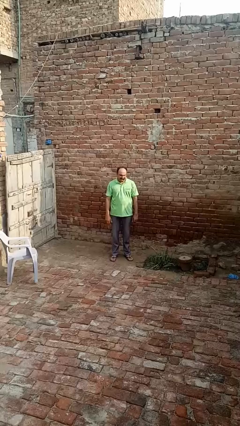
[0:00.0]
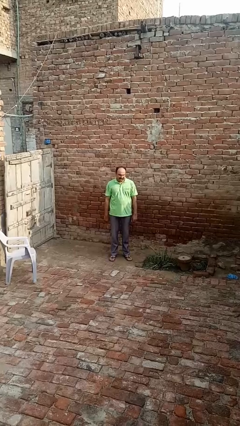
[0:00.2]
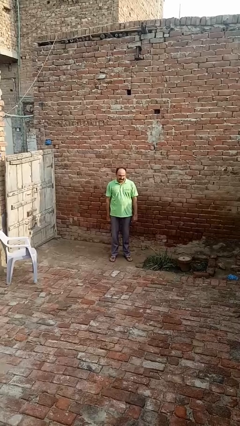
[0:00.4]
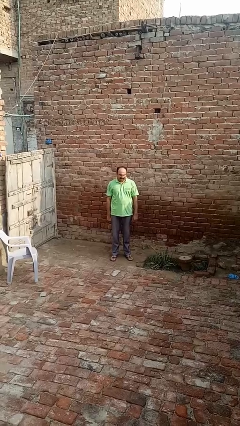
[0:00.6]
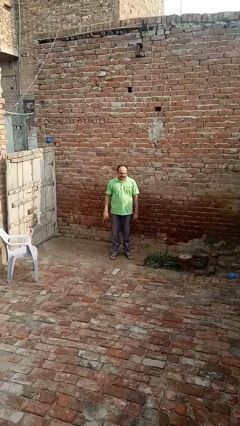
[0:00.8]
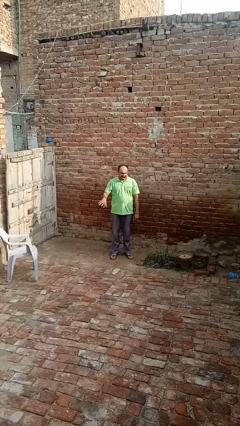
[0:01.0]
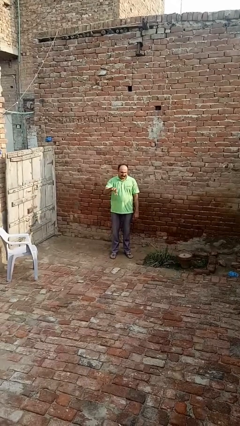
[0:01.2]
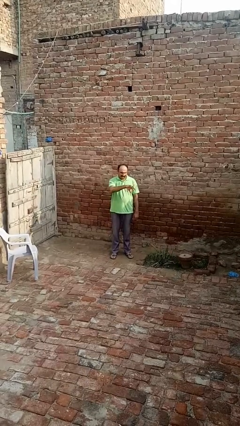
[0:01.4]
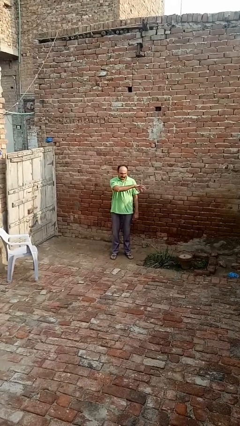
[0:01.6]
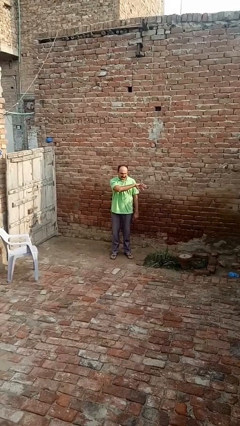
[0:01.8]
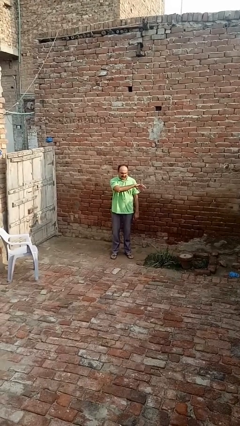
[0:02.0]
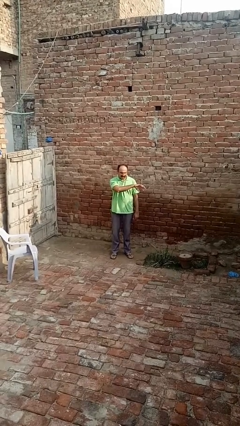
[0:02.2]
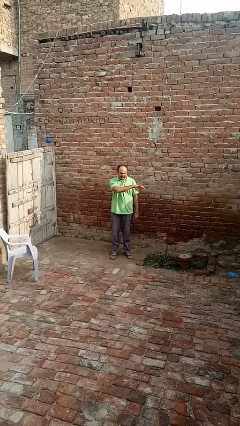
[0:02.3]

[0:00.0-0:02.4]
person gestures swipe left

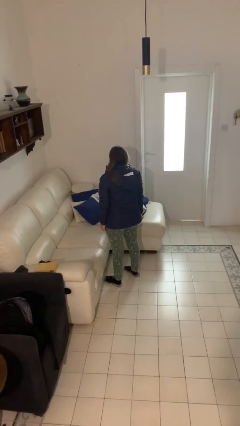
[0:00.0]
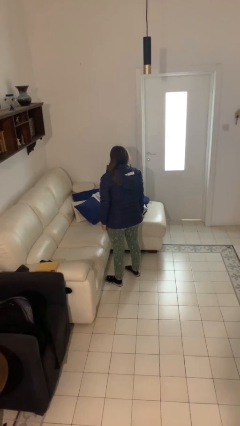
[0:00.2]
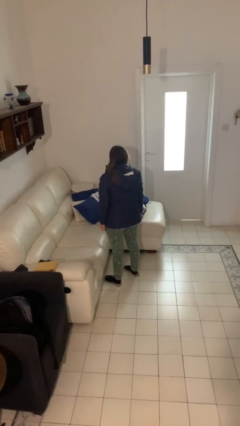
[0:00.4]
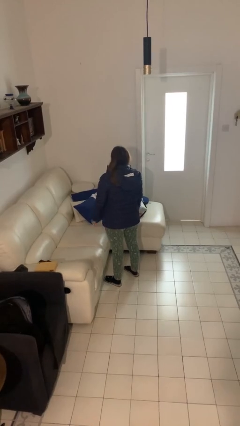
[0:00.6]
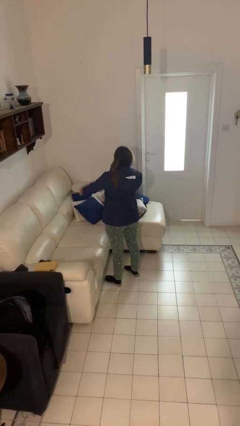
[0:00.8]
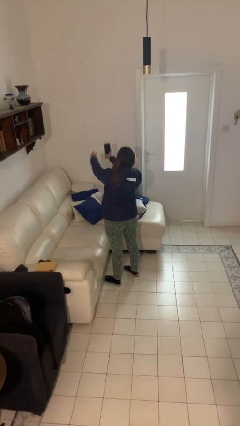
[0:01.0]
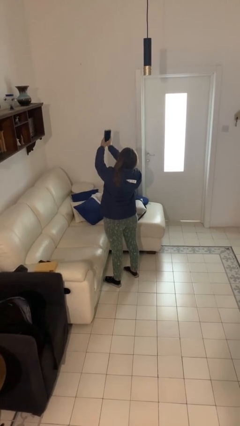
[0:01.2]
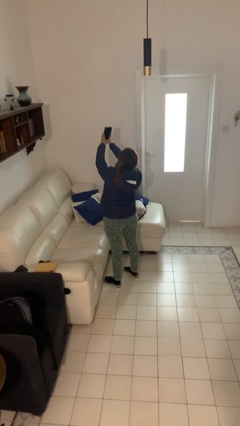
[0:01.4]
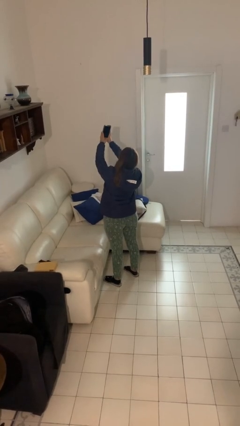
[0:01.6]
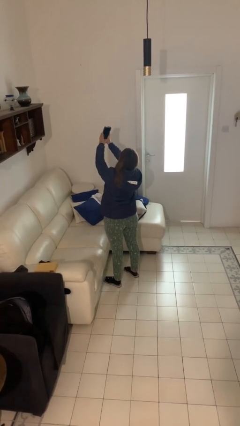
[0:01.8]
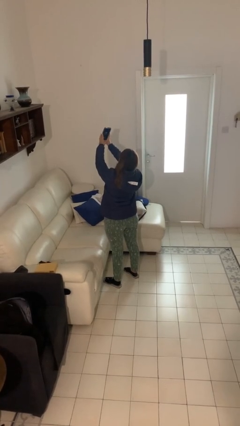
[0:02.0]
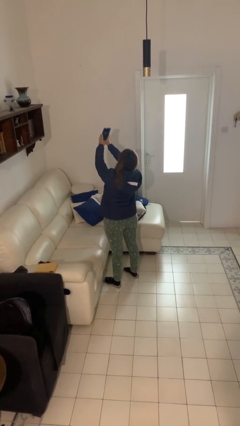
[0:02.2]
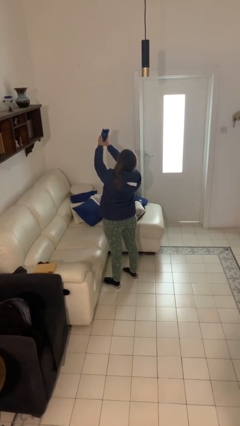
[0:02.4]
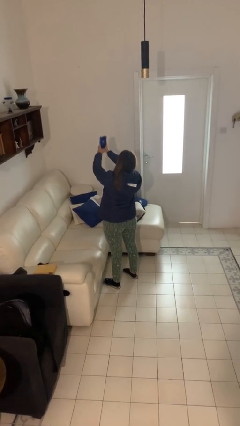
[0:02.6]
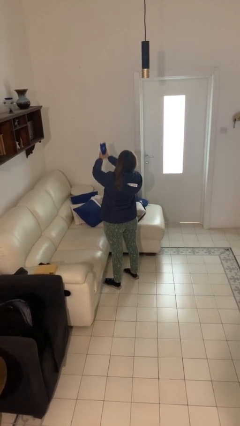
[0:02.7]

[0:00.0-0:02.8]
person takes selfie

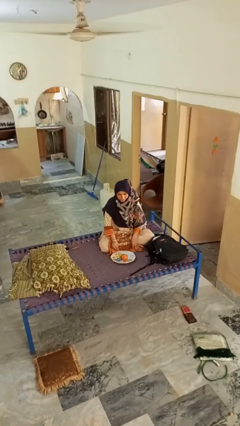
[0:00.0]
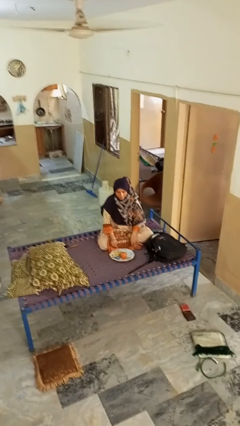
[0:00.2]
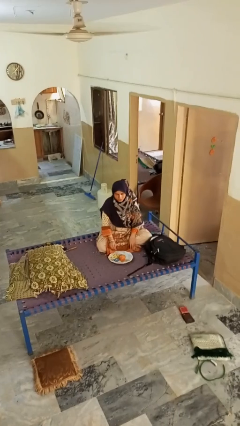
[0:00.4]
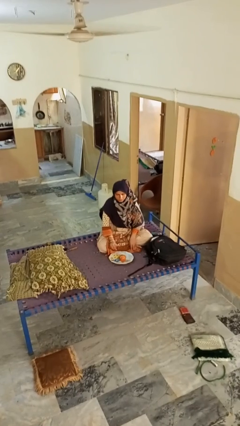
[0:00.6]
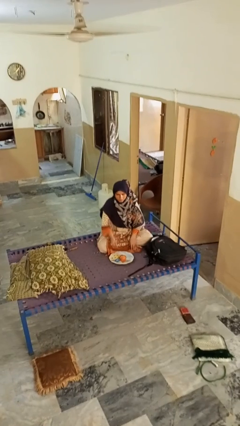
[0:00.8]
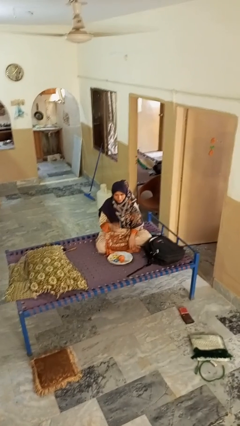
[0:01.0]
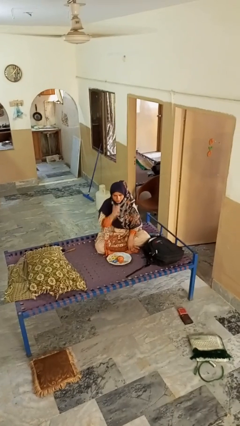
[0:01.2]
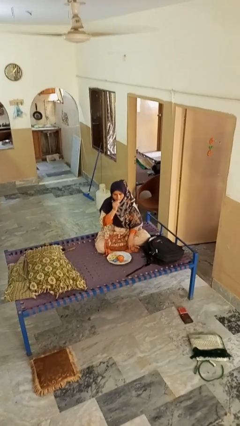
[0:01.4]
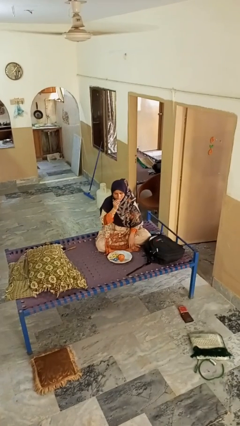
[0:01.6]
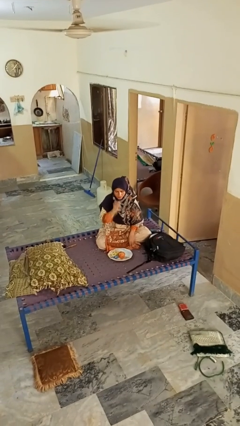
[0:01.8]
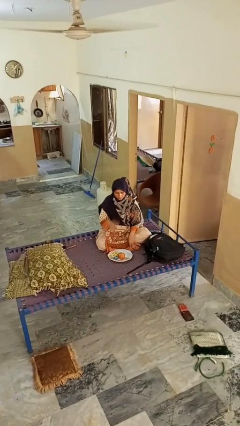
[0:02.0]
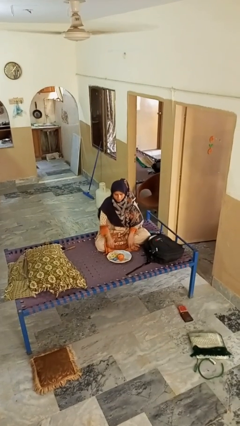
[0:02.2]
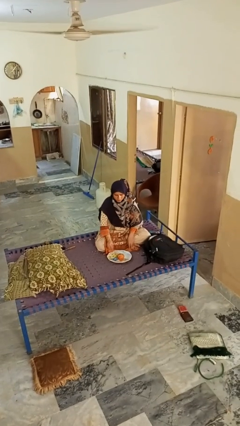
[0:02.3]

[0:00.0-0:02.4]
person eats apple

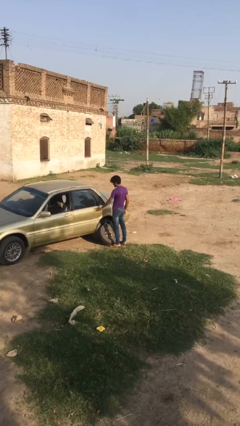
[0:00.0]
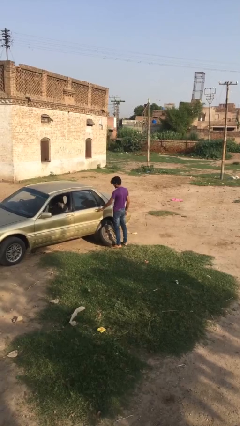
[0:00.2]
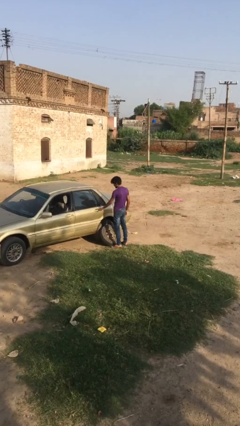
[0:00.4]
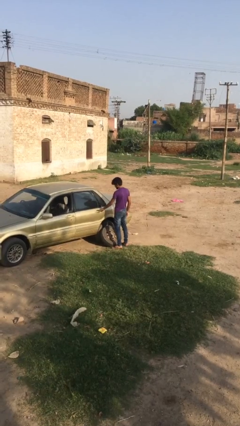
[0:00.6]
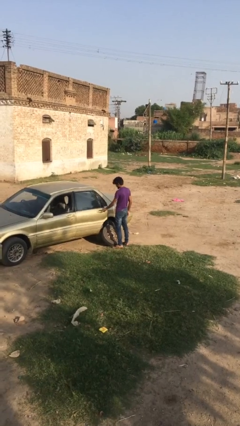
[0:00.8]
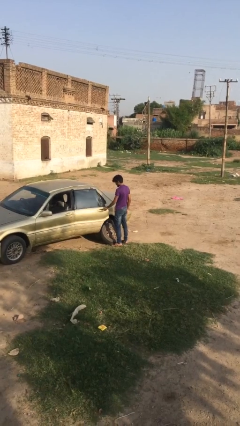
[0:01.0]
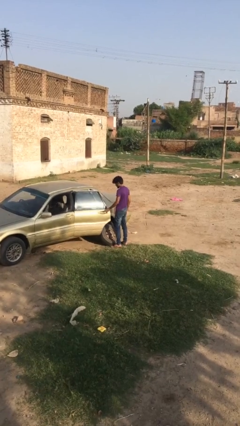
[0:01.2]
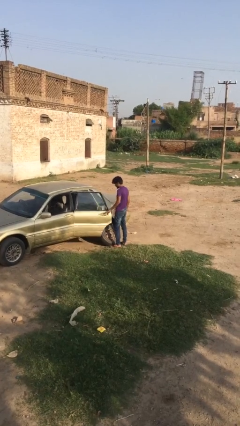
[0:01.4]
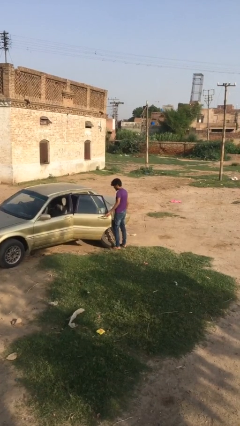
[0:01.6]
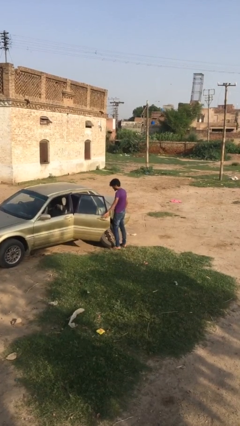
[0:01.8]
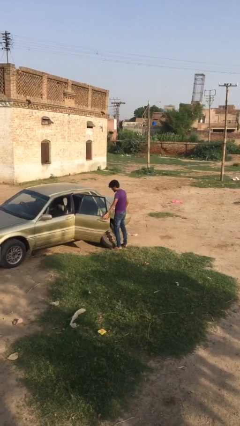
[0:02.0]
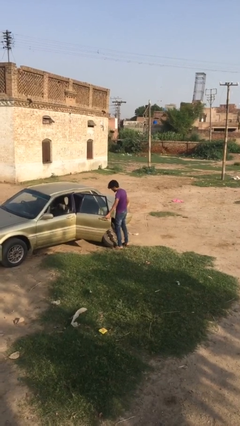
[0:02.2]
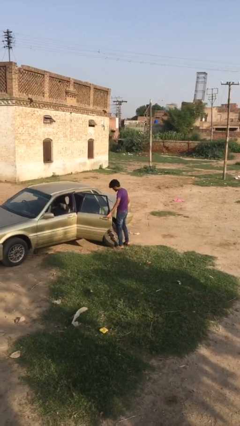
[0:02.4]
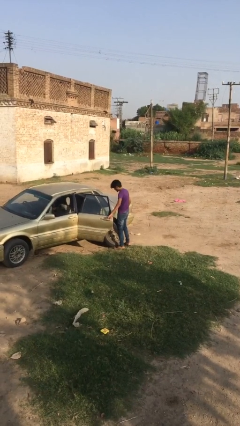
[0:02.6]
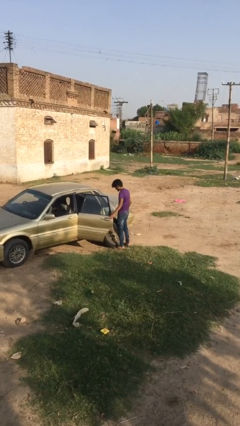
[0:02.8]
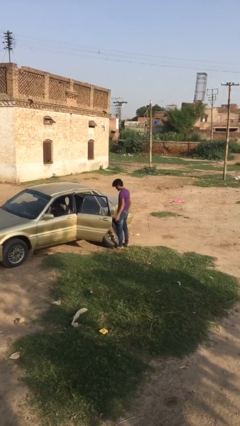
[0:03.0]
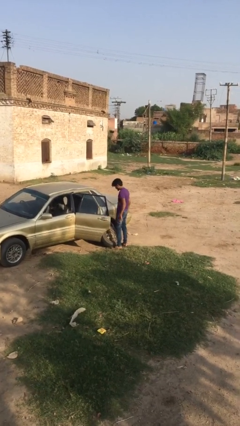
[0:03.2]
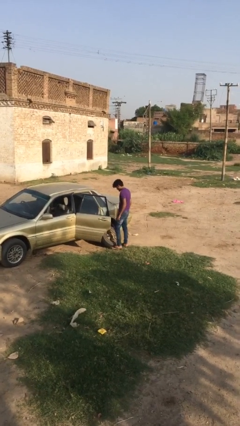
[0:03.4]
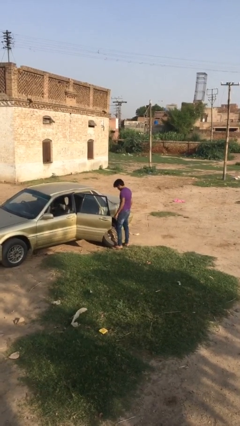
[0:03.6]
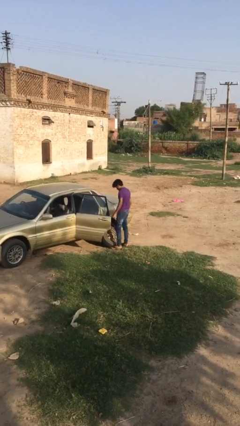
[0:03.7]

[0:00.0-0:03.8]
person opens car door

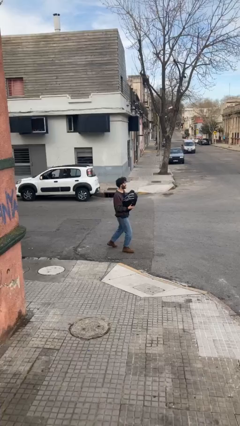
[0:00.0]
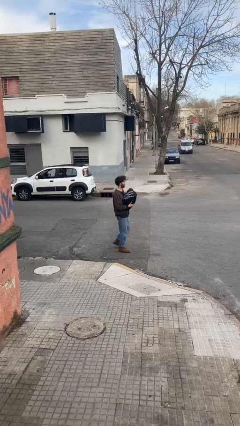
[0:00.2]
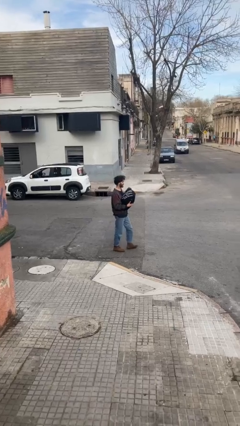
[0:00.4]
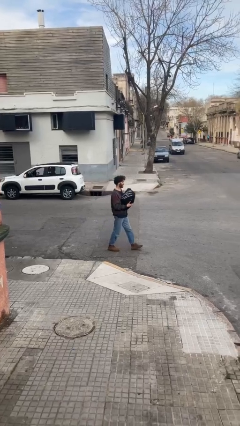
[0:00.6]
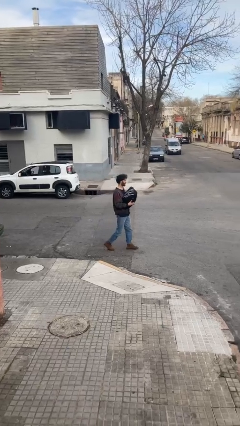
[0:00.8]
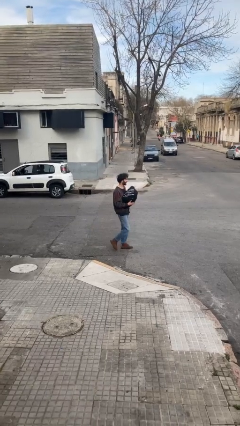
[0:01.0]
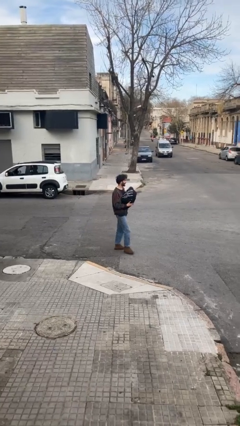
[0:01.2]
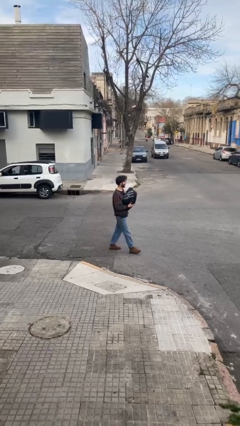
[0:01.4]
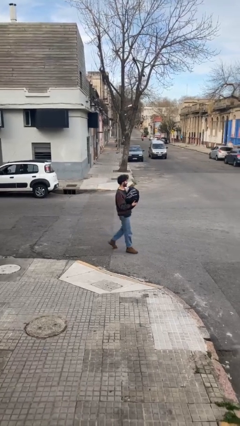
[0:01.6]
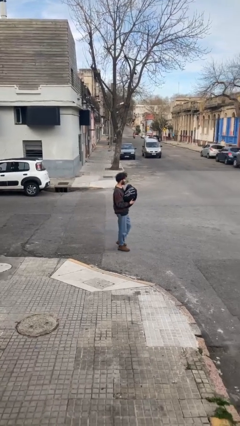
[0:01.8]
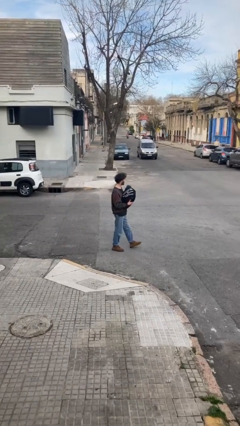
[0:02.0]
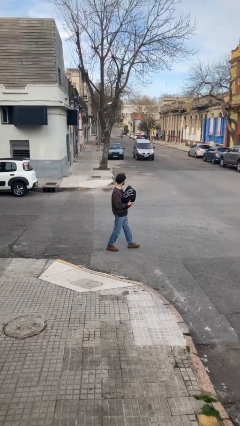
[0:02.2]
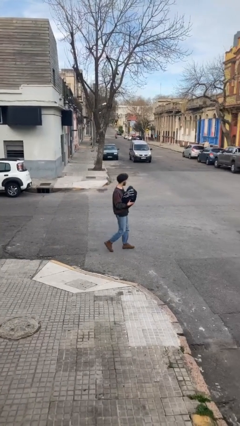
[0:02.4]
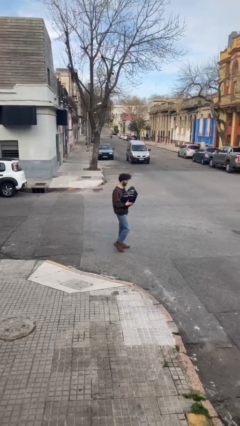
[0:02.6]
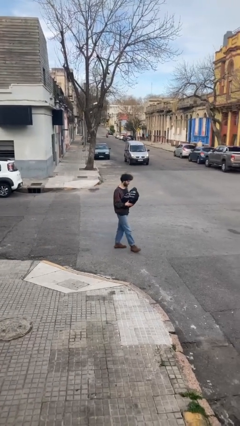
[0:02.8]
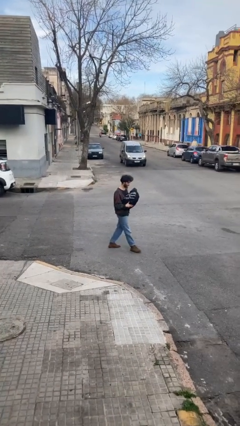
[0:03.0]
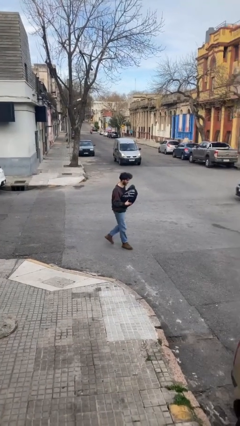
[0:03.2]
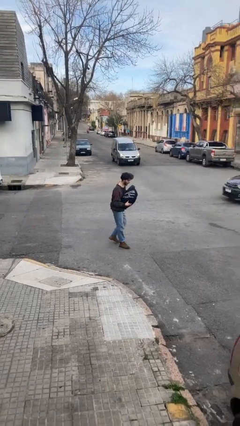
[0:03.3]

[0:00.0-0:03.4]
person carries heavy object

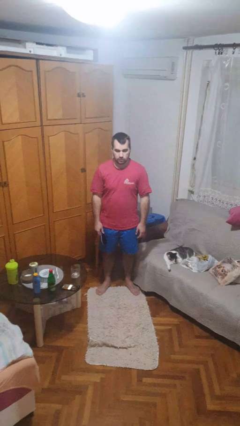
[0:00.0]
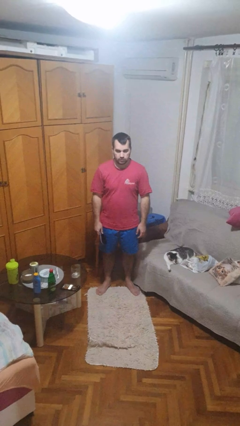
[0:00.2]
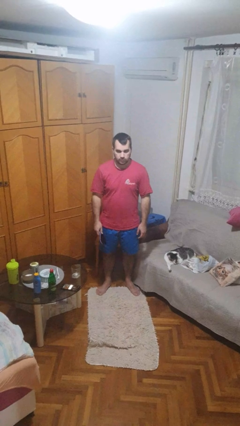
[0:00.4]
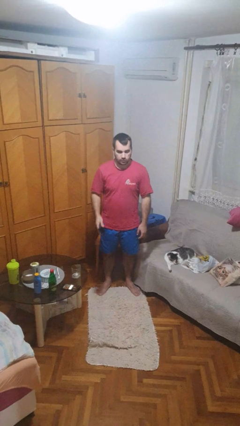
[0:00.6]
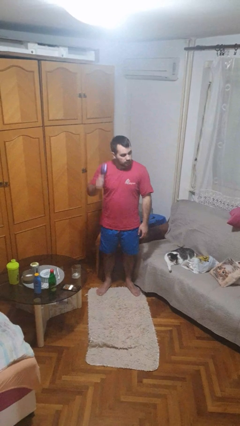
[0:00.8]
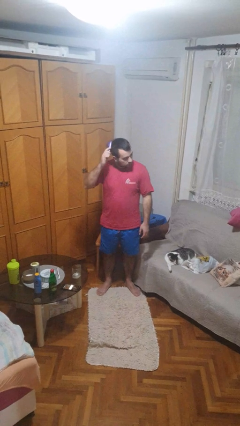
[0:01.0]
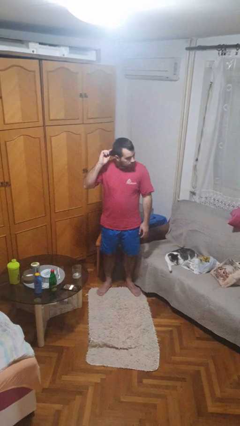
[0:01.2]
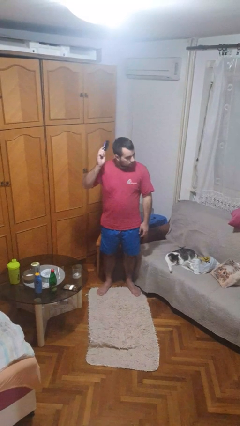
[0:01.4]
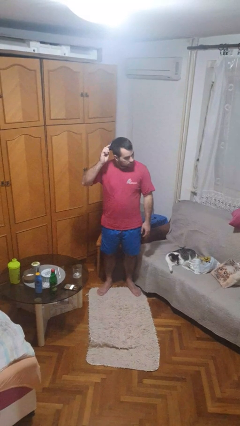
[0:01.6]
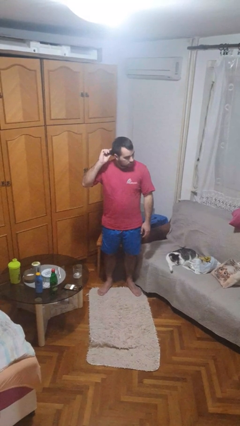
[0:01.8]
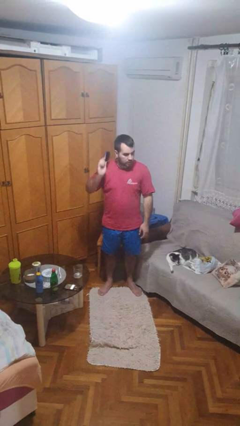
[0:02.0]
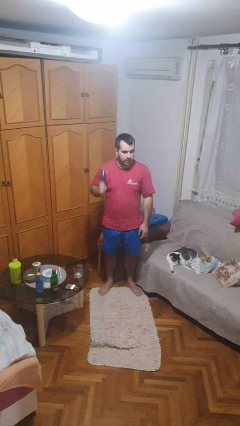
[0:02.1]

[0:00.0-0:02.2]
person brushes hair

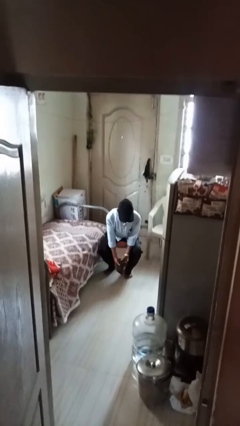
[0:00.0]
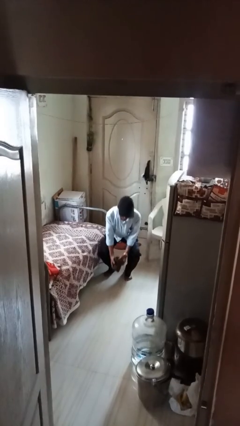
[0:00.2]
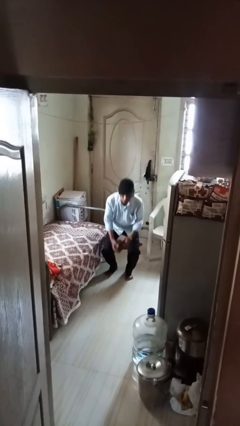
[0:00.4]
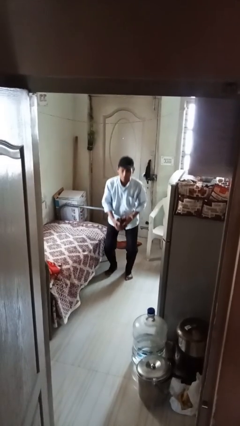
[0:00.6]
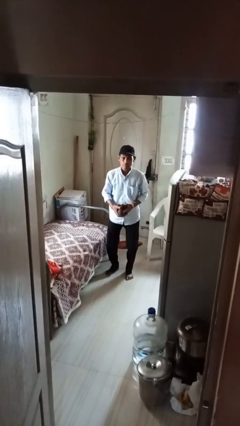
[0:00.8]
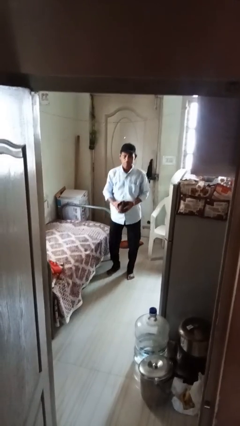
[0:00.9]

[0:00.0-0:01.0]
person catches dropped object
